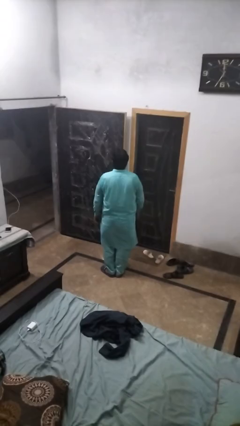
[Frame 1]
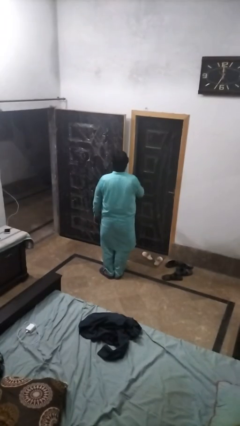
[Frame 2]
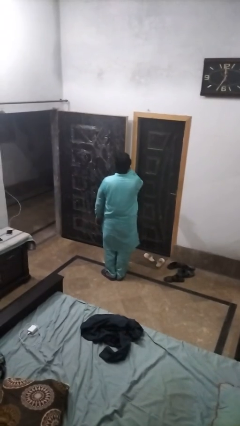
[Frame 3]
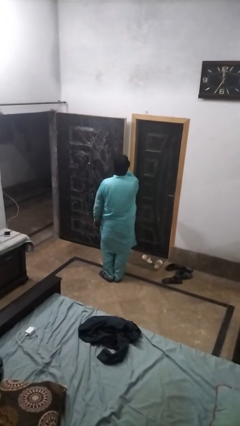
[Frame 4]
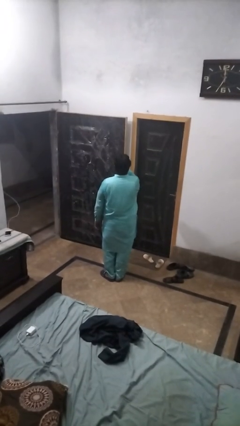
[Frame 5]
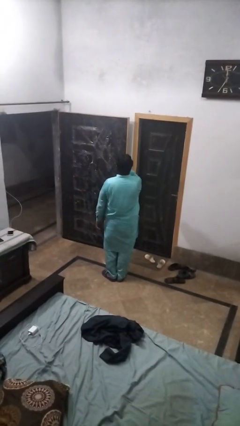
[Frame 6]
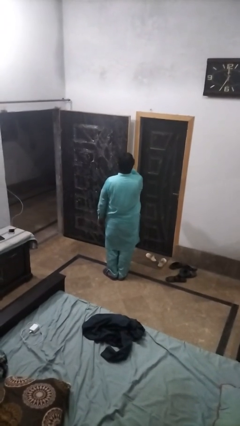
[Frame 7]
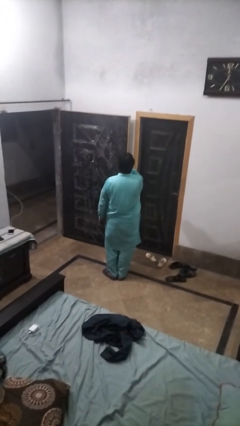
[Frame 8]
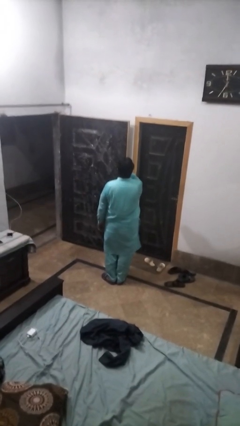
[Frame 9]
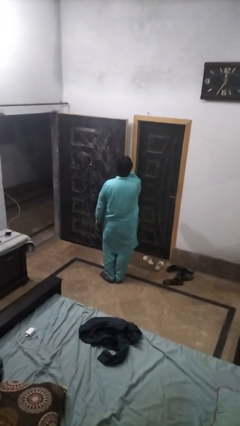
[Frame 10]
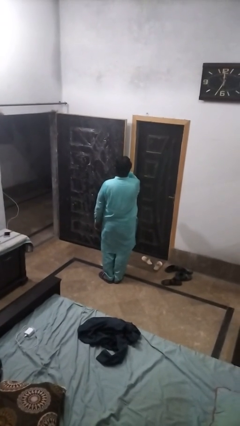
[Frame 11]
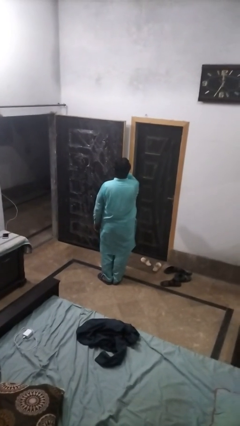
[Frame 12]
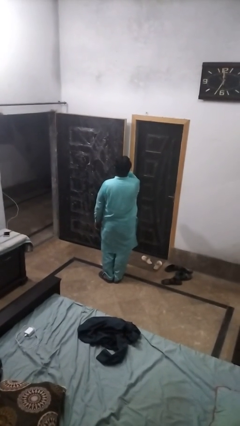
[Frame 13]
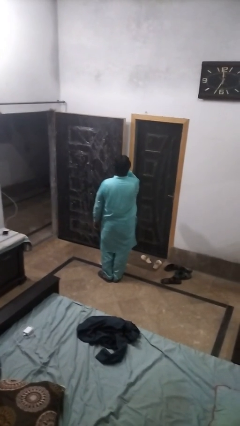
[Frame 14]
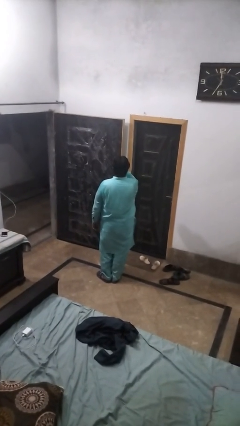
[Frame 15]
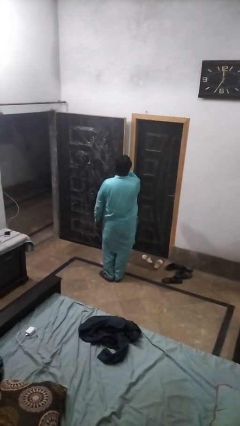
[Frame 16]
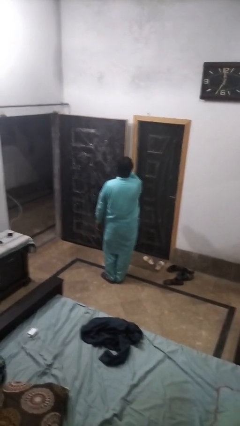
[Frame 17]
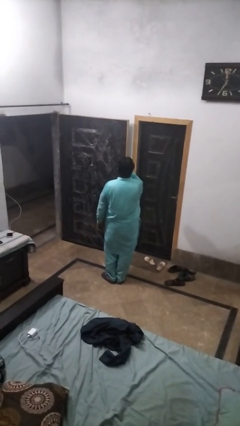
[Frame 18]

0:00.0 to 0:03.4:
person licks fingers

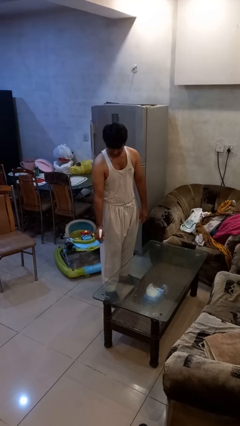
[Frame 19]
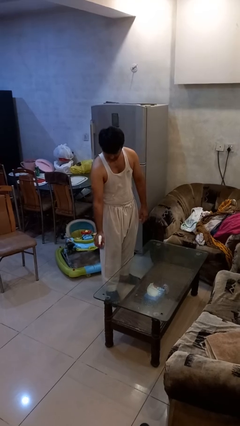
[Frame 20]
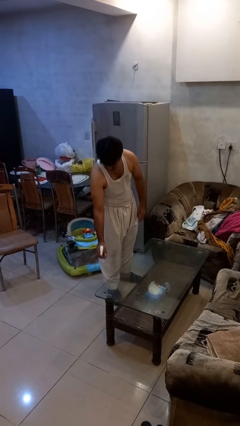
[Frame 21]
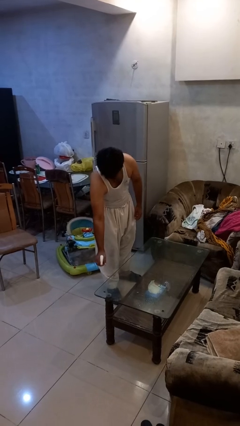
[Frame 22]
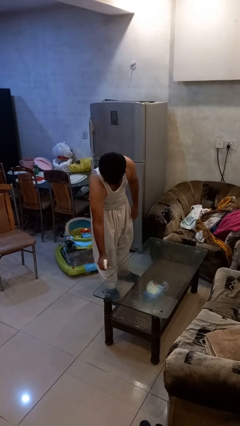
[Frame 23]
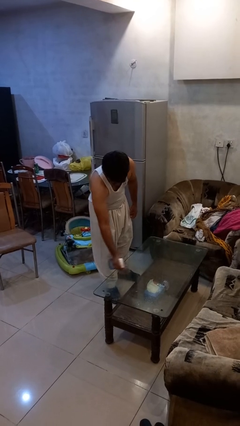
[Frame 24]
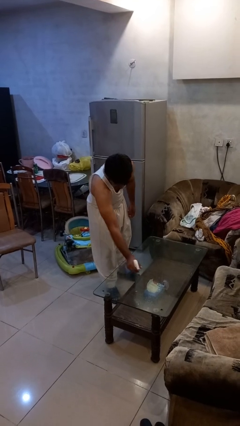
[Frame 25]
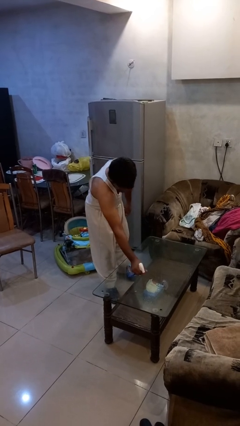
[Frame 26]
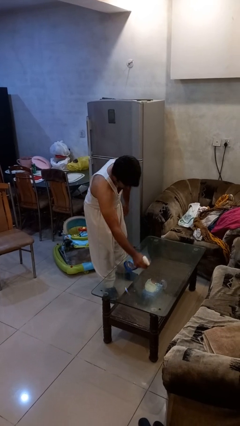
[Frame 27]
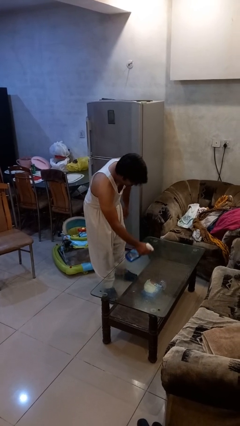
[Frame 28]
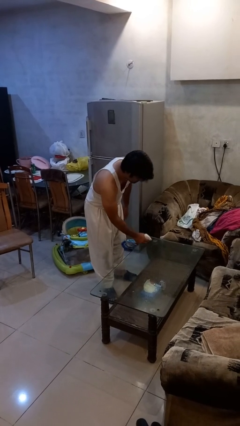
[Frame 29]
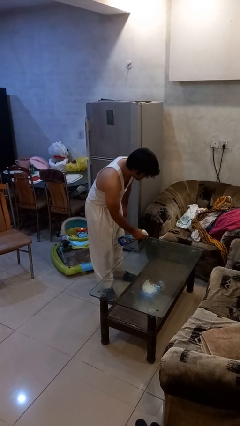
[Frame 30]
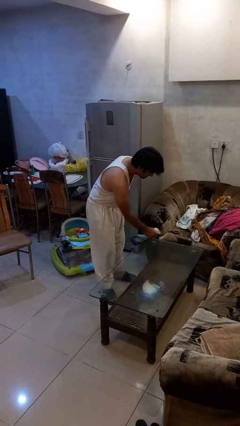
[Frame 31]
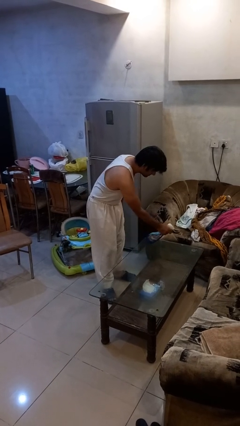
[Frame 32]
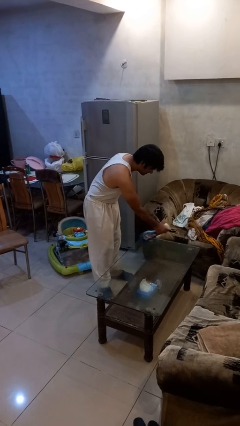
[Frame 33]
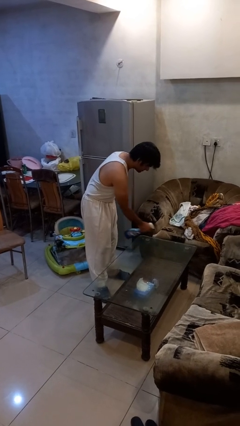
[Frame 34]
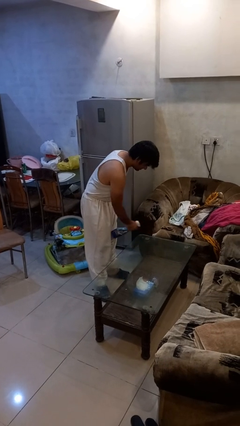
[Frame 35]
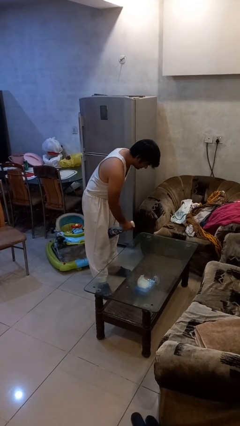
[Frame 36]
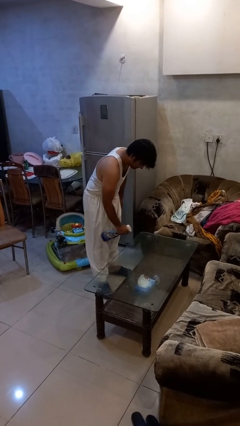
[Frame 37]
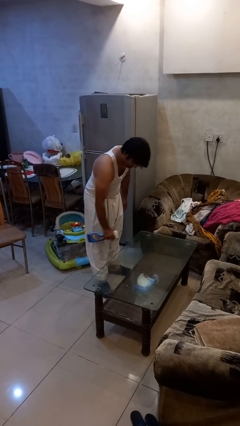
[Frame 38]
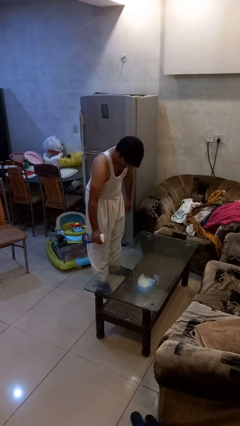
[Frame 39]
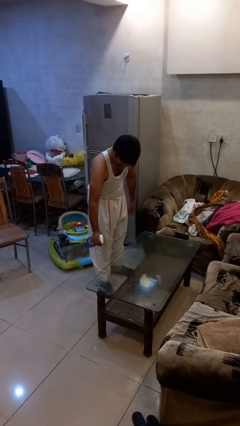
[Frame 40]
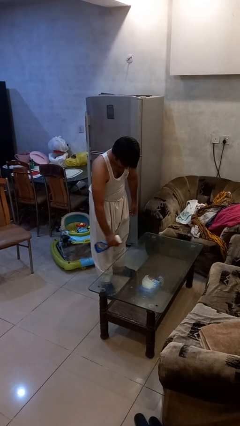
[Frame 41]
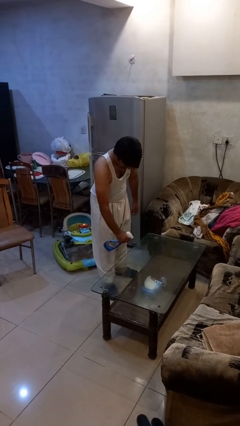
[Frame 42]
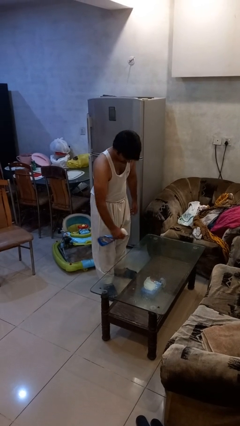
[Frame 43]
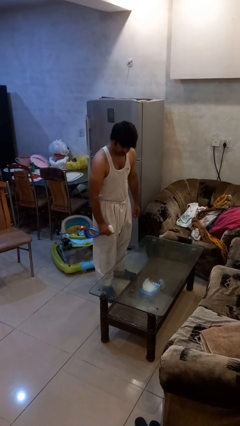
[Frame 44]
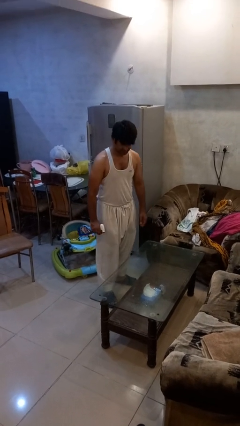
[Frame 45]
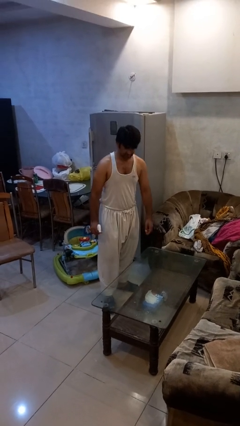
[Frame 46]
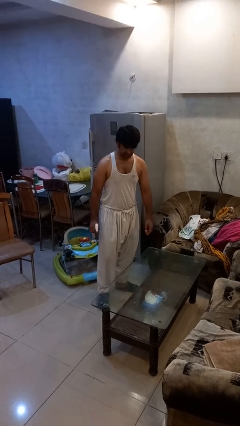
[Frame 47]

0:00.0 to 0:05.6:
person sprays from bottle

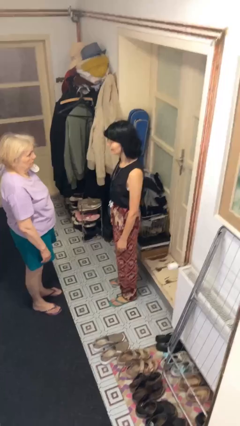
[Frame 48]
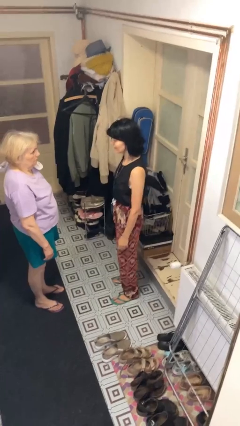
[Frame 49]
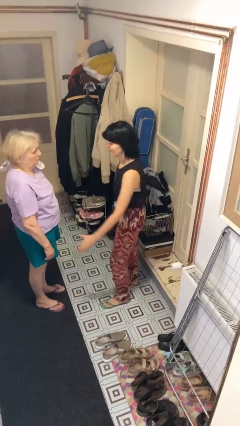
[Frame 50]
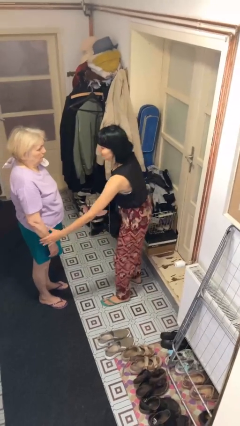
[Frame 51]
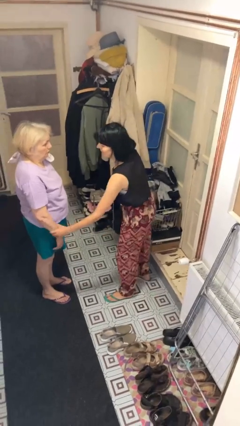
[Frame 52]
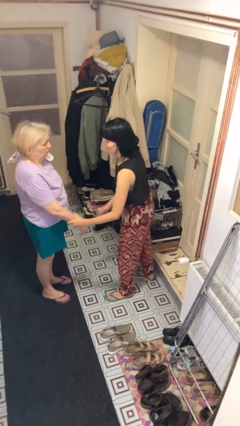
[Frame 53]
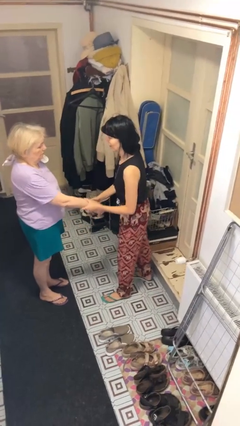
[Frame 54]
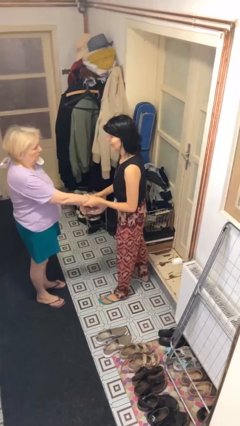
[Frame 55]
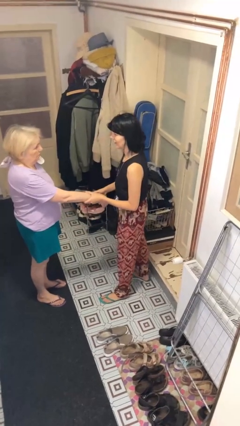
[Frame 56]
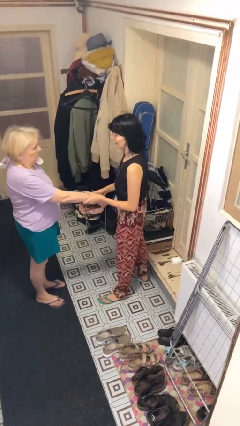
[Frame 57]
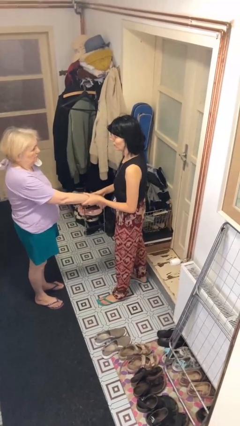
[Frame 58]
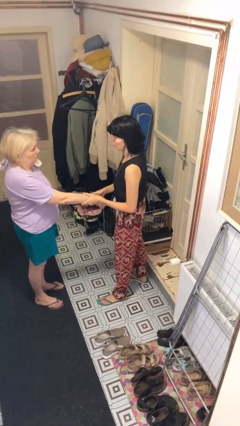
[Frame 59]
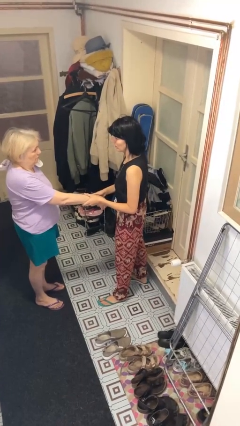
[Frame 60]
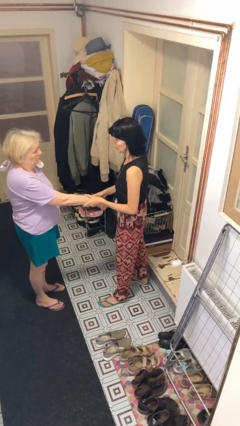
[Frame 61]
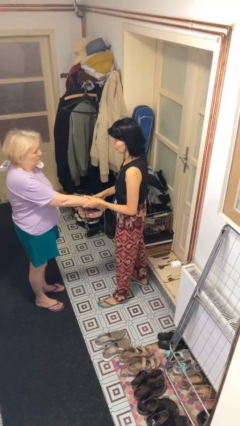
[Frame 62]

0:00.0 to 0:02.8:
person grabs person by forearm

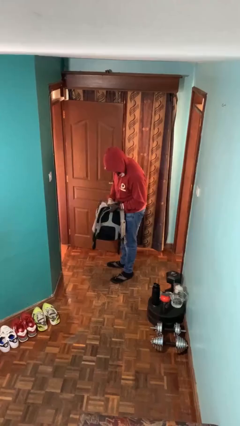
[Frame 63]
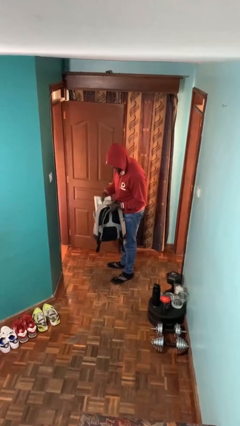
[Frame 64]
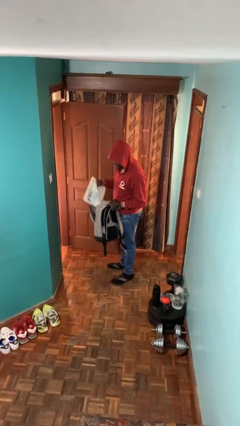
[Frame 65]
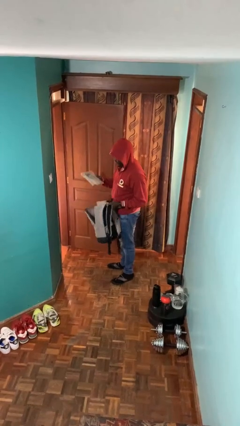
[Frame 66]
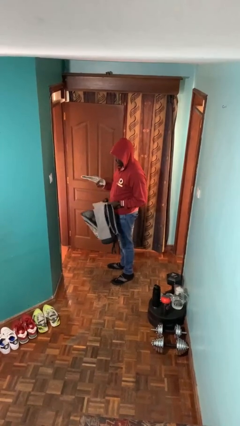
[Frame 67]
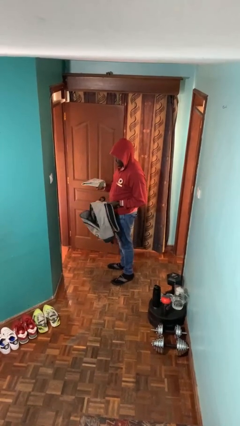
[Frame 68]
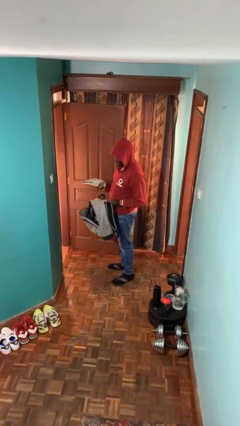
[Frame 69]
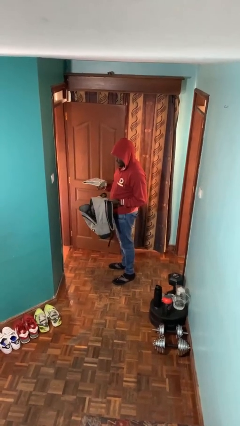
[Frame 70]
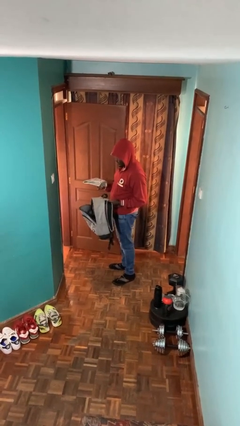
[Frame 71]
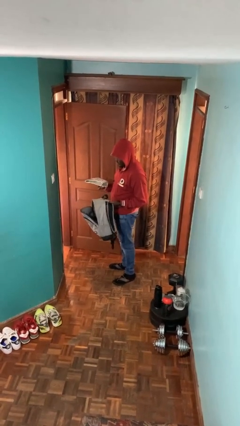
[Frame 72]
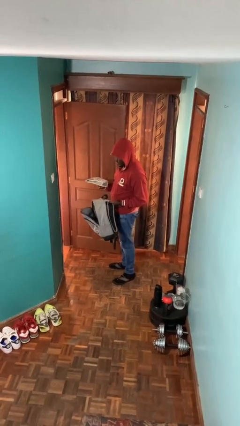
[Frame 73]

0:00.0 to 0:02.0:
person takes object from backpack

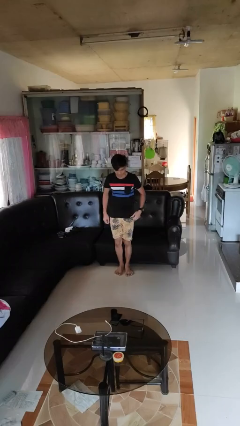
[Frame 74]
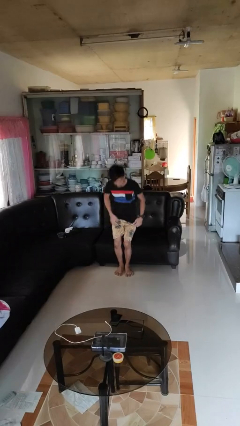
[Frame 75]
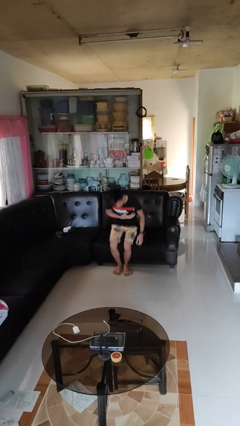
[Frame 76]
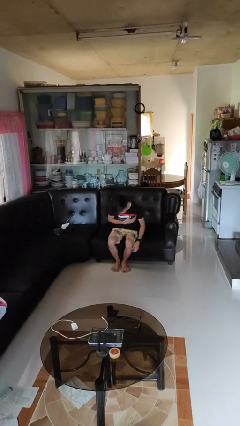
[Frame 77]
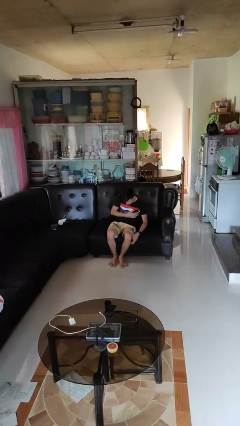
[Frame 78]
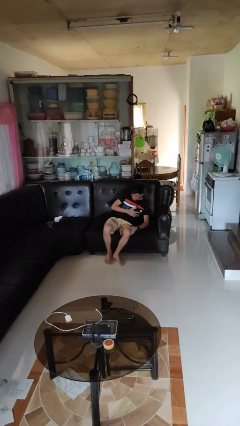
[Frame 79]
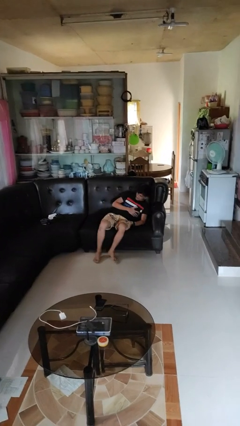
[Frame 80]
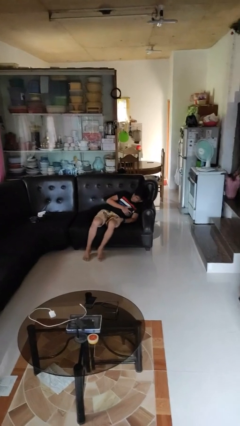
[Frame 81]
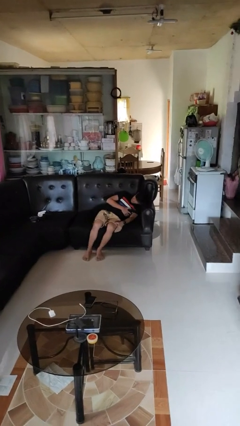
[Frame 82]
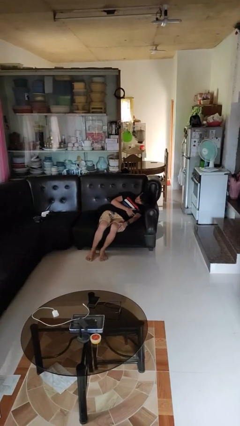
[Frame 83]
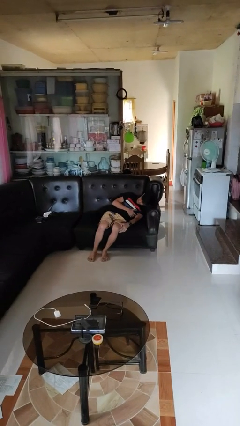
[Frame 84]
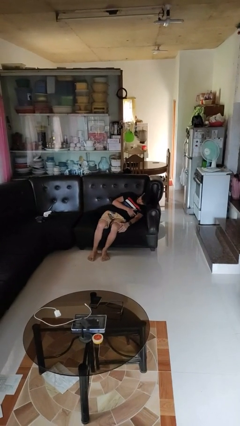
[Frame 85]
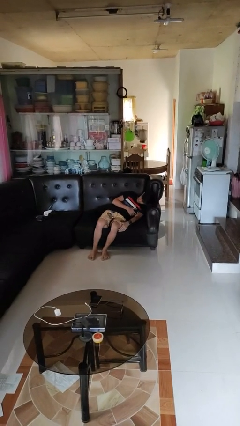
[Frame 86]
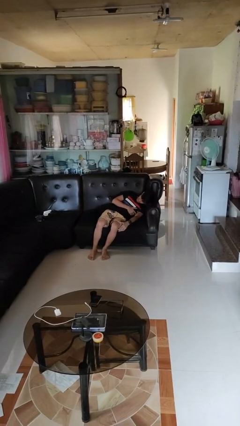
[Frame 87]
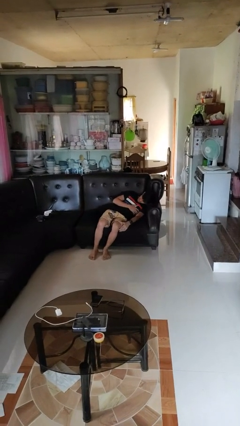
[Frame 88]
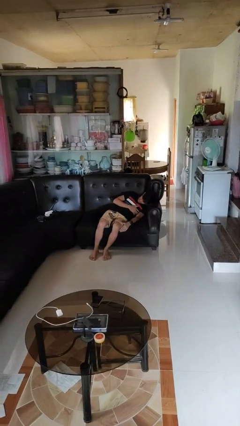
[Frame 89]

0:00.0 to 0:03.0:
person lies down on couch

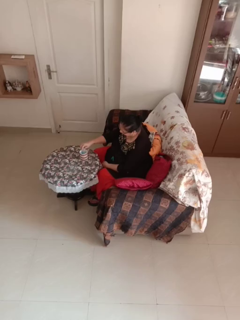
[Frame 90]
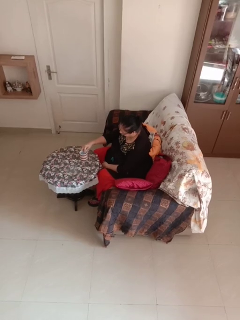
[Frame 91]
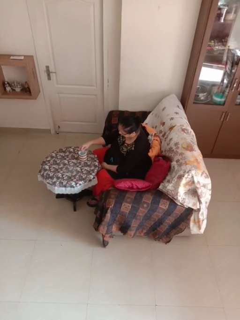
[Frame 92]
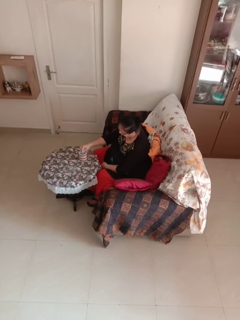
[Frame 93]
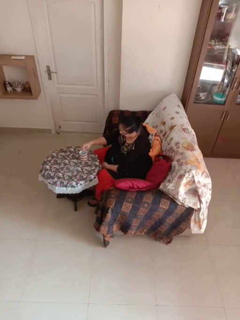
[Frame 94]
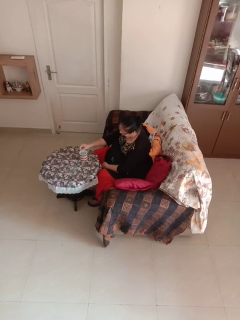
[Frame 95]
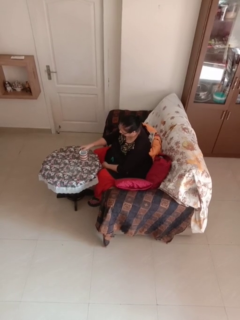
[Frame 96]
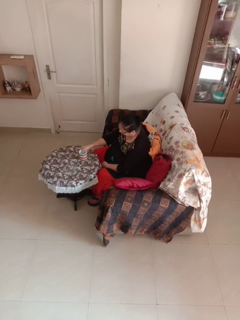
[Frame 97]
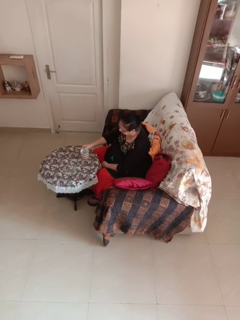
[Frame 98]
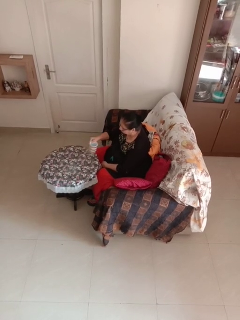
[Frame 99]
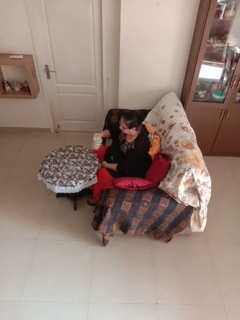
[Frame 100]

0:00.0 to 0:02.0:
person stirs mug
